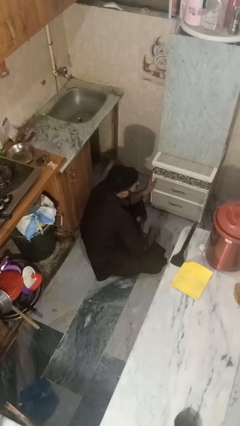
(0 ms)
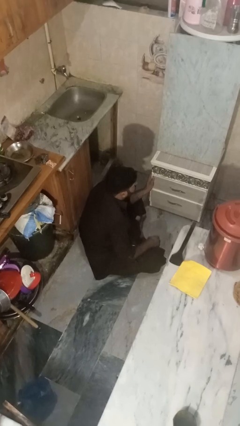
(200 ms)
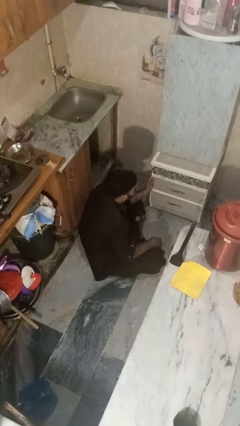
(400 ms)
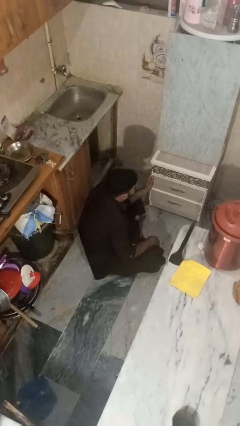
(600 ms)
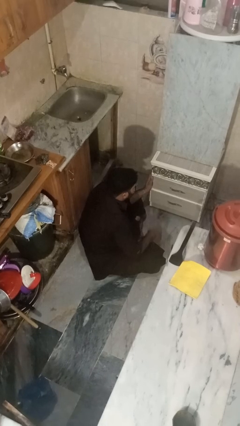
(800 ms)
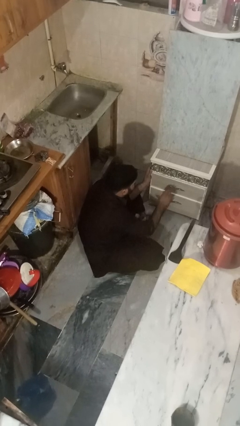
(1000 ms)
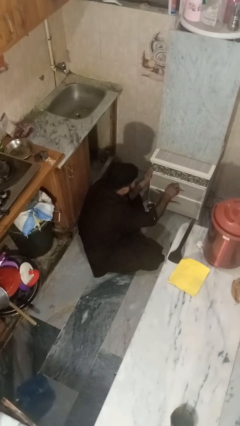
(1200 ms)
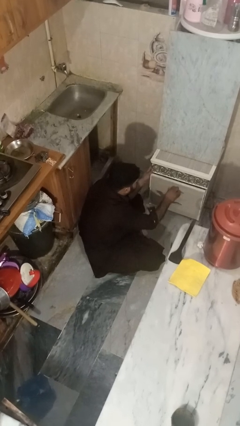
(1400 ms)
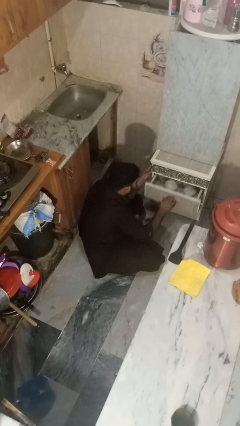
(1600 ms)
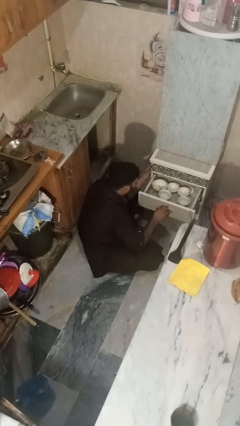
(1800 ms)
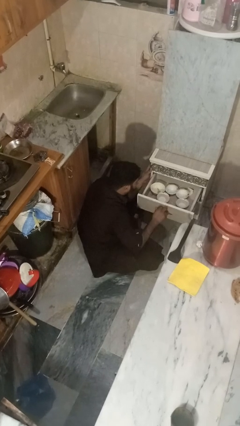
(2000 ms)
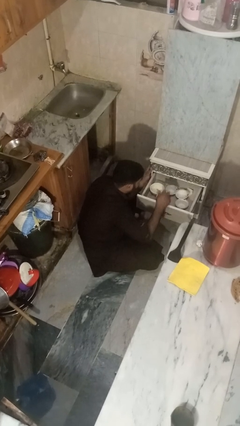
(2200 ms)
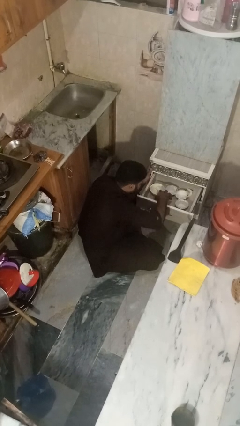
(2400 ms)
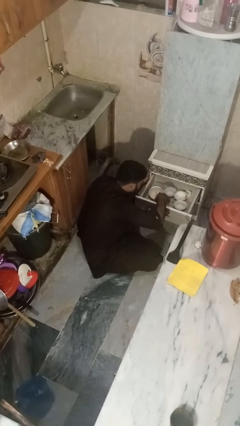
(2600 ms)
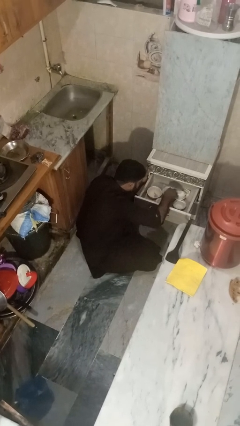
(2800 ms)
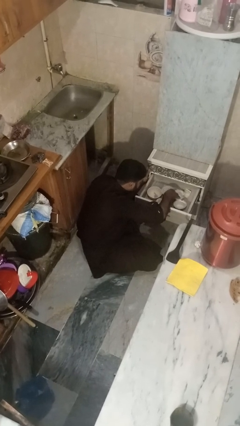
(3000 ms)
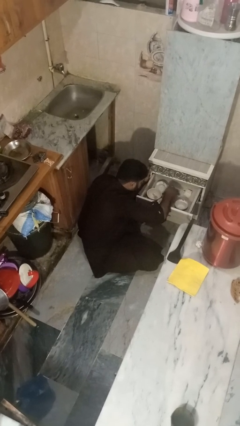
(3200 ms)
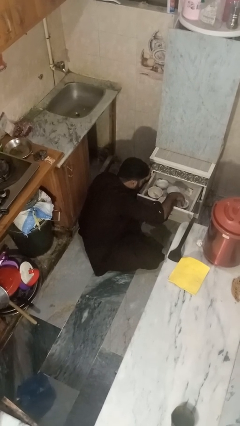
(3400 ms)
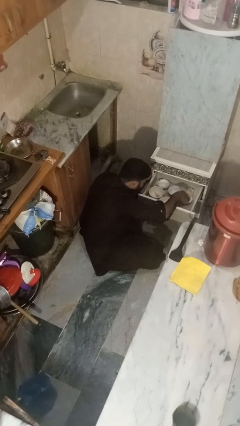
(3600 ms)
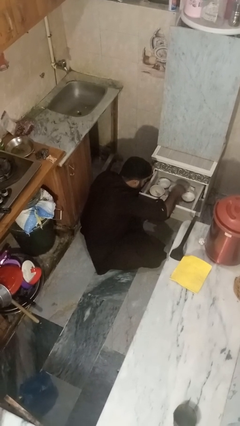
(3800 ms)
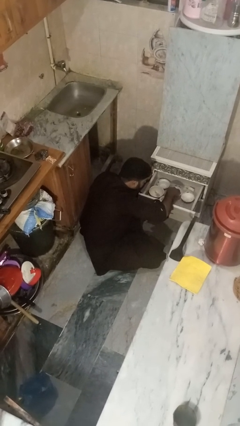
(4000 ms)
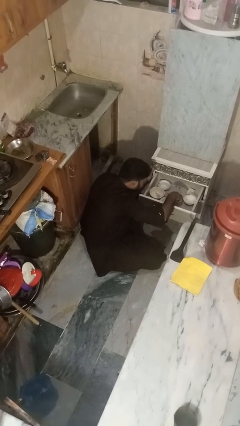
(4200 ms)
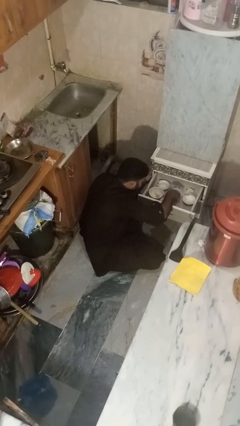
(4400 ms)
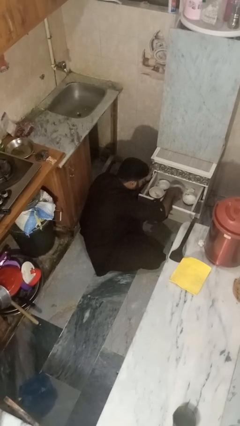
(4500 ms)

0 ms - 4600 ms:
person searches in kitchen drawer

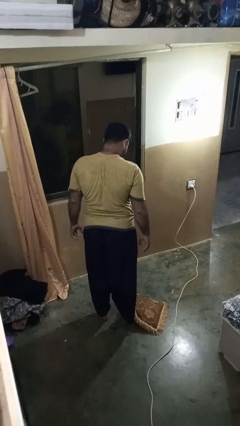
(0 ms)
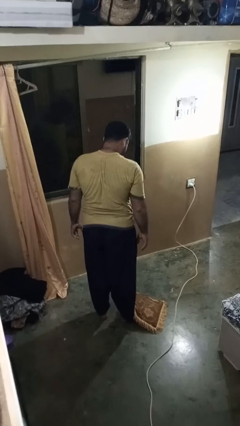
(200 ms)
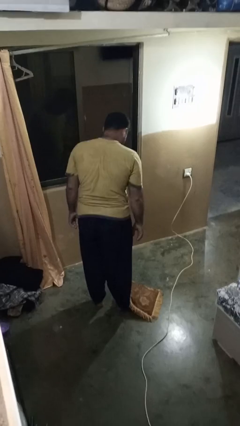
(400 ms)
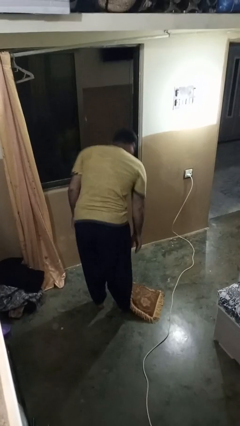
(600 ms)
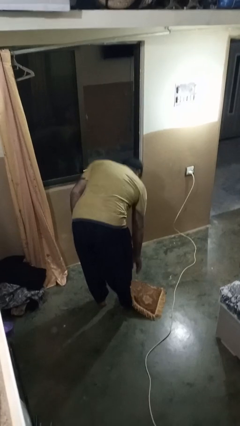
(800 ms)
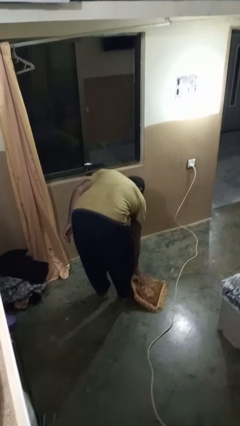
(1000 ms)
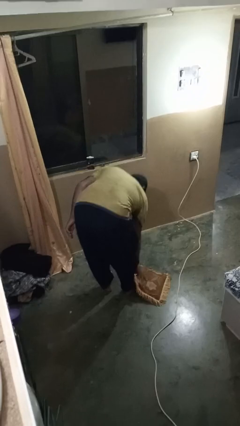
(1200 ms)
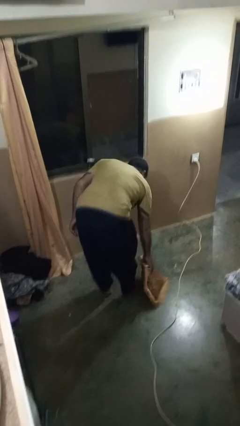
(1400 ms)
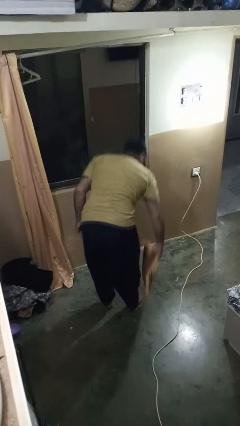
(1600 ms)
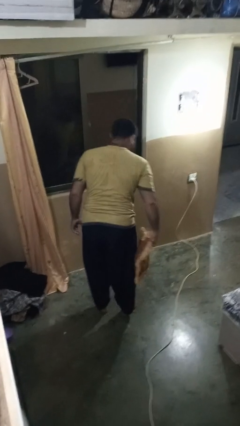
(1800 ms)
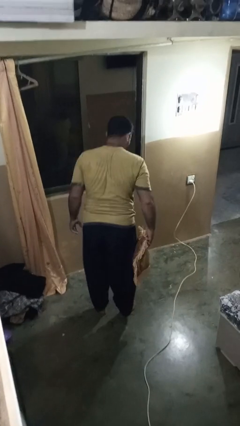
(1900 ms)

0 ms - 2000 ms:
person picks up object from floor

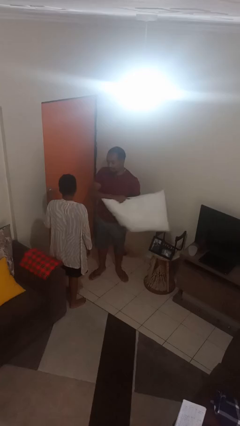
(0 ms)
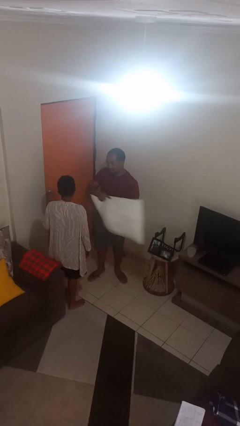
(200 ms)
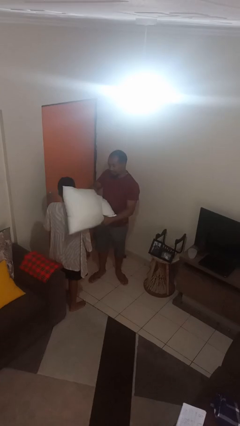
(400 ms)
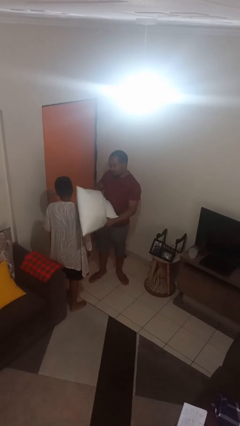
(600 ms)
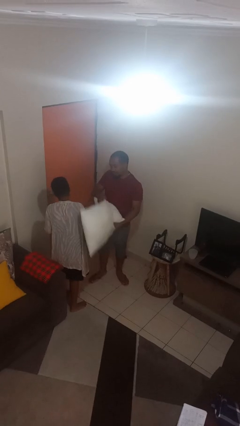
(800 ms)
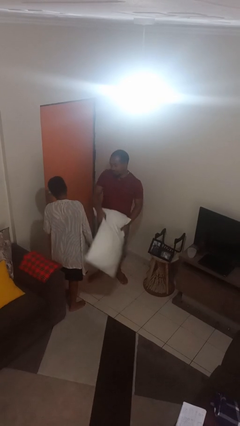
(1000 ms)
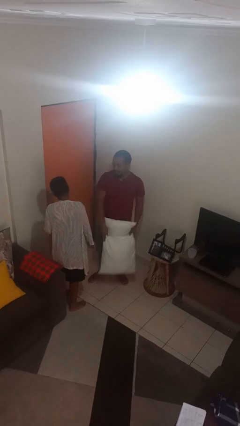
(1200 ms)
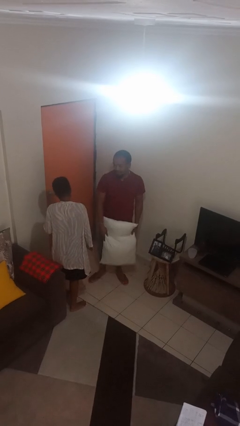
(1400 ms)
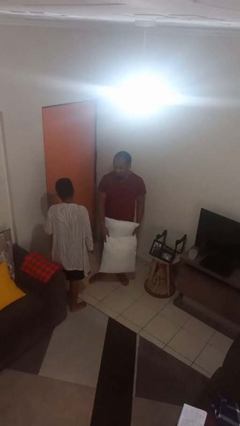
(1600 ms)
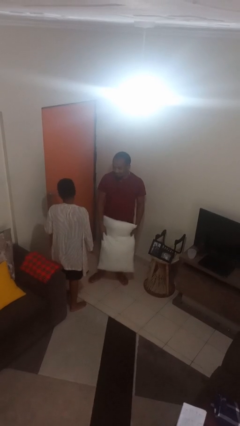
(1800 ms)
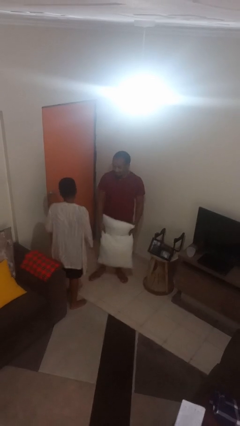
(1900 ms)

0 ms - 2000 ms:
person hits person with pillow

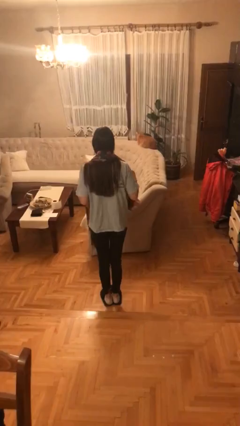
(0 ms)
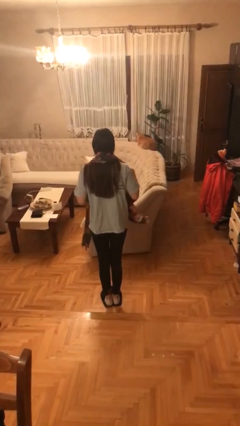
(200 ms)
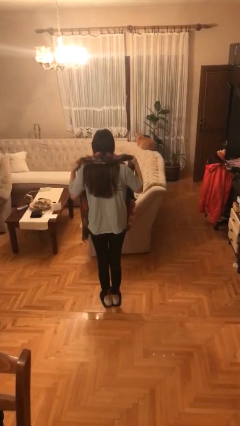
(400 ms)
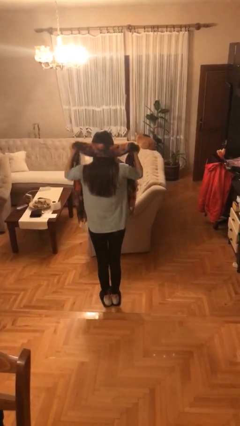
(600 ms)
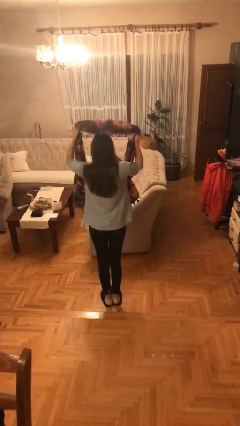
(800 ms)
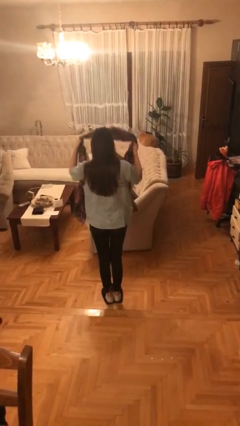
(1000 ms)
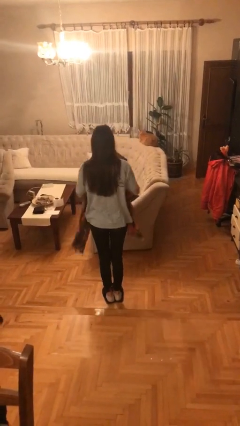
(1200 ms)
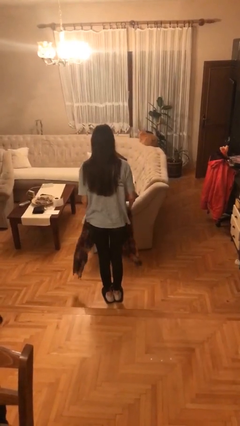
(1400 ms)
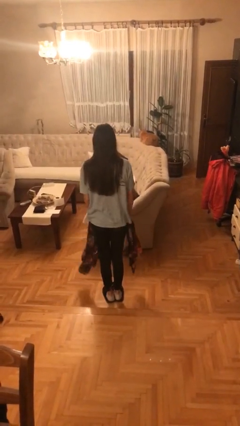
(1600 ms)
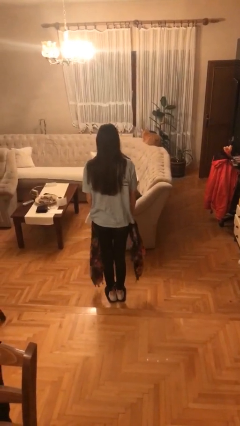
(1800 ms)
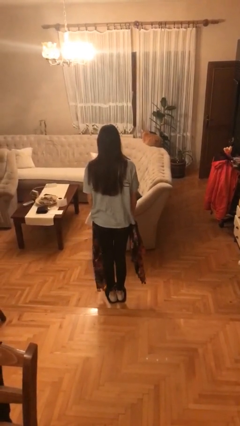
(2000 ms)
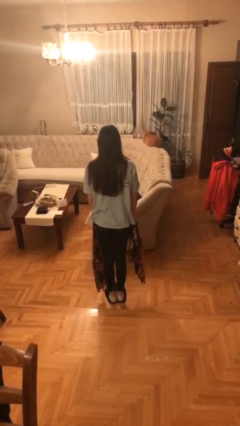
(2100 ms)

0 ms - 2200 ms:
person takes off scarf

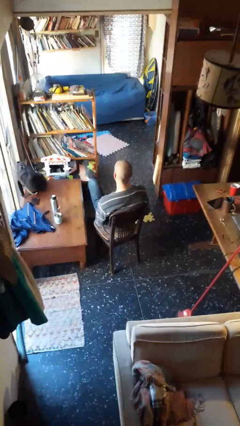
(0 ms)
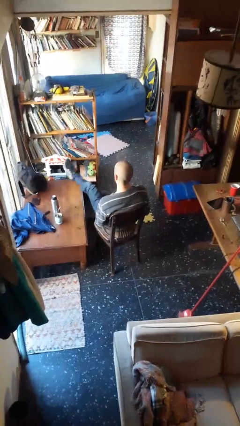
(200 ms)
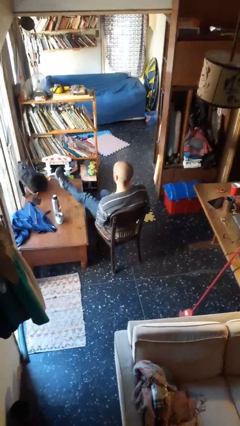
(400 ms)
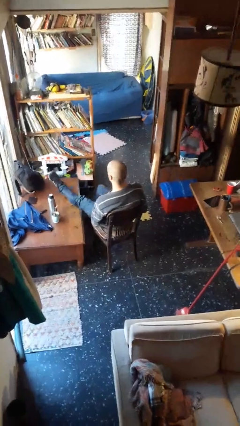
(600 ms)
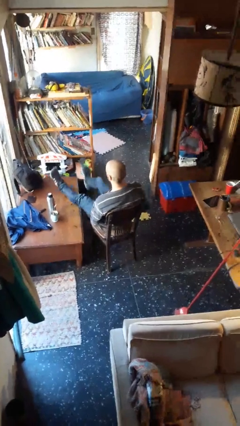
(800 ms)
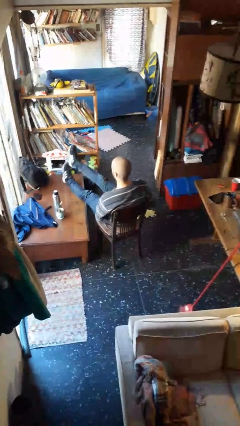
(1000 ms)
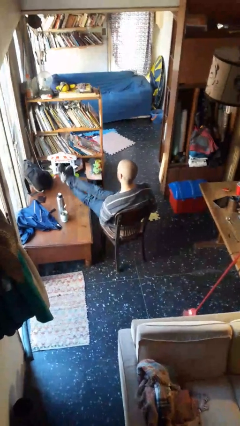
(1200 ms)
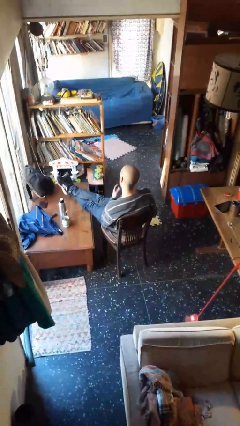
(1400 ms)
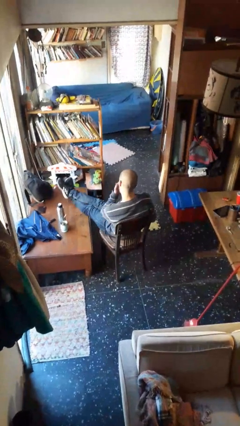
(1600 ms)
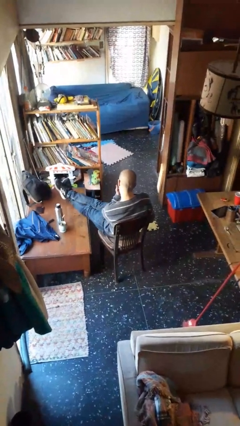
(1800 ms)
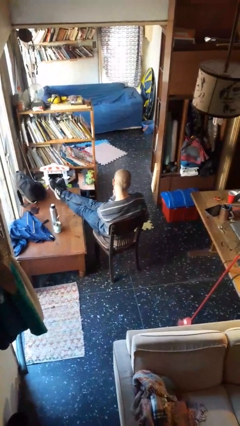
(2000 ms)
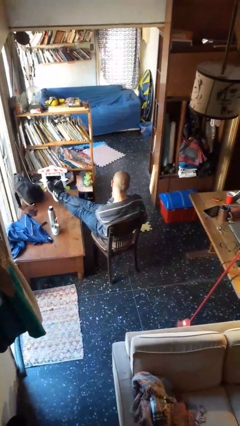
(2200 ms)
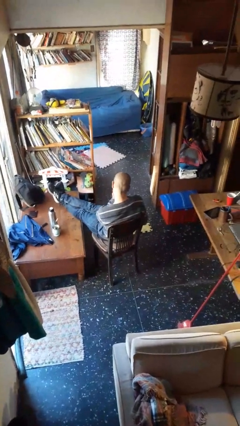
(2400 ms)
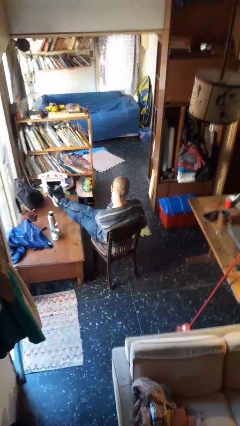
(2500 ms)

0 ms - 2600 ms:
person puts feet up

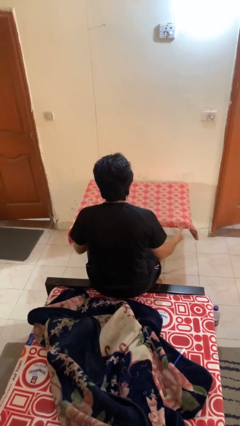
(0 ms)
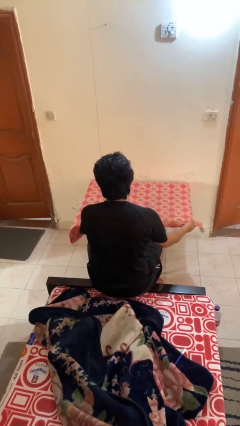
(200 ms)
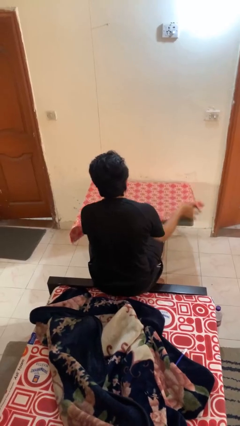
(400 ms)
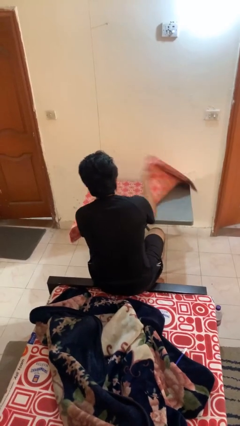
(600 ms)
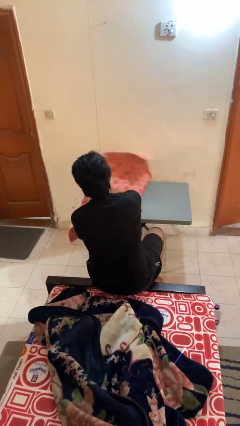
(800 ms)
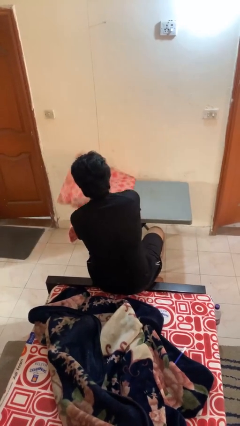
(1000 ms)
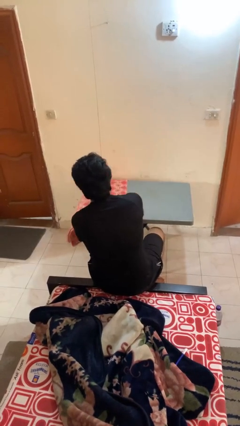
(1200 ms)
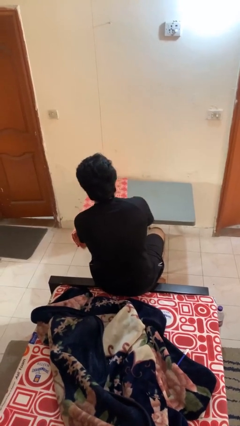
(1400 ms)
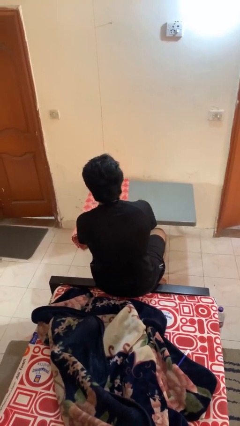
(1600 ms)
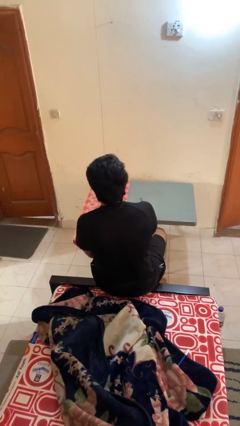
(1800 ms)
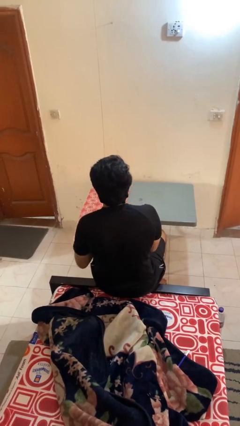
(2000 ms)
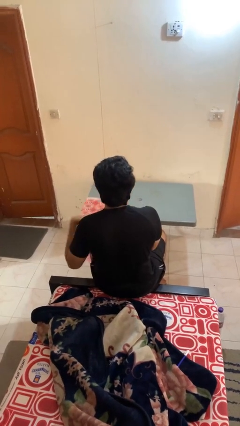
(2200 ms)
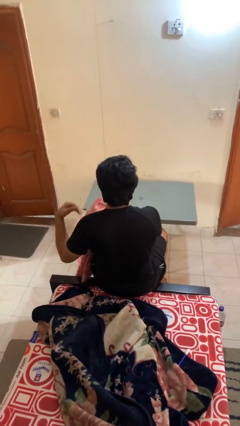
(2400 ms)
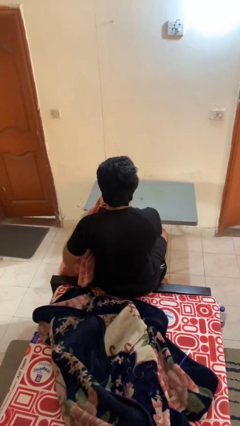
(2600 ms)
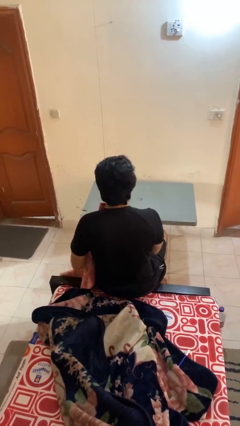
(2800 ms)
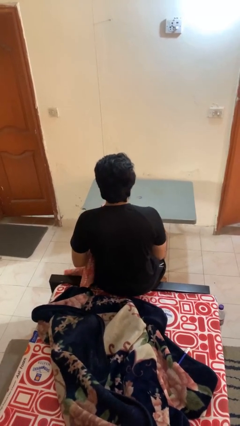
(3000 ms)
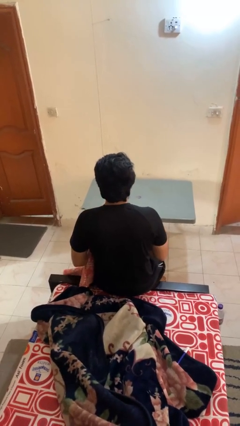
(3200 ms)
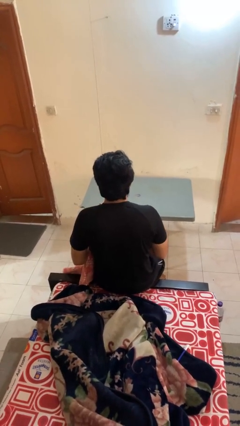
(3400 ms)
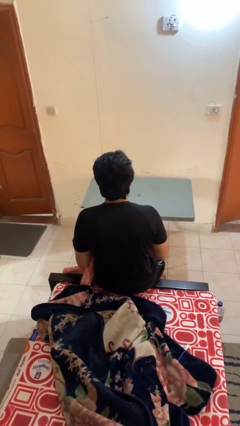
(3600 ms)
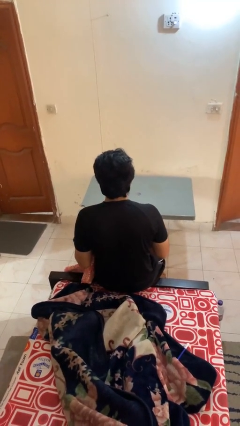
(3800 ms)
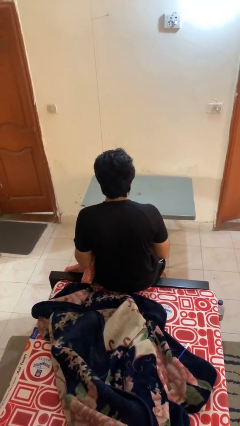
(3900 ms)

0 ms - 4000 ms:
person folds tablecloth
